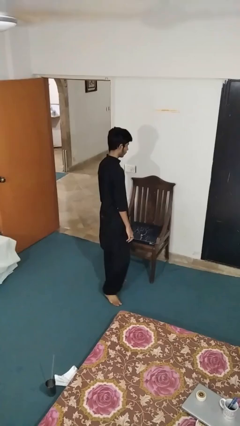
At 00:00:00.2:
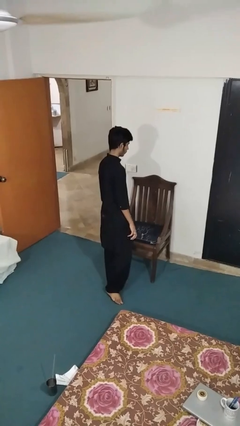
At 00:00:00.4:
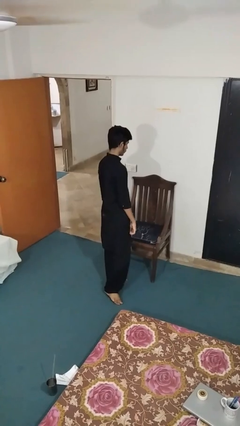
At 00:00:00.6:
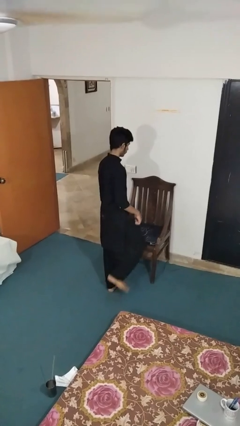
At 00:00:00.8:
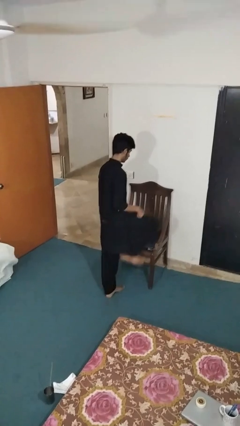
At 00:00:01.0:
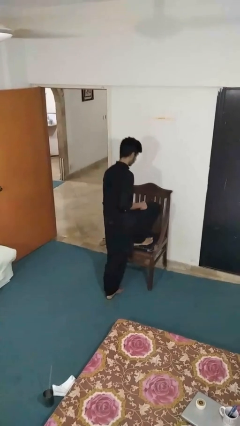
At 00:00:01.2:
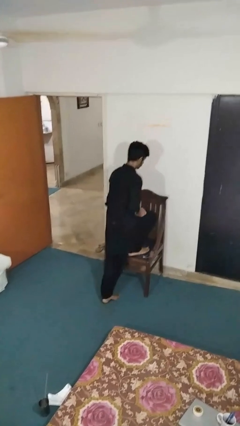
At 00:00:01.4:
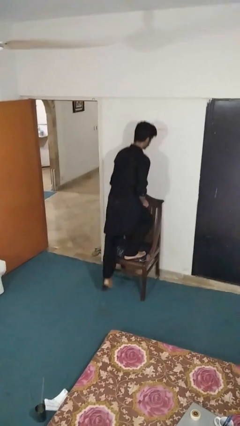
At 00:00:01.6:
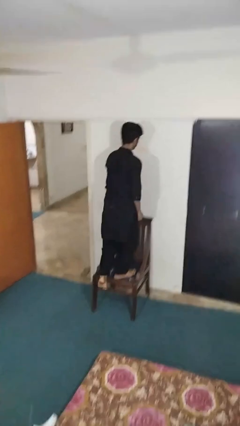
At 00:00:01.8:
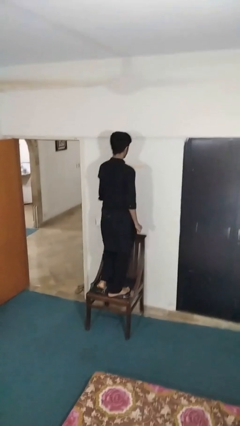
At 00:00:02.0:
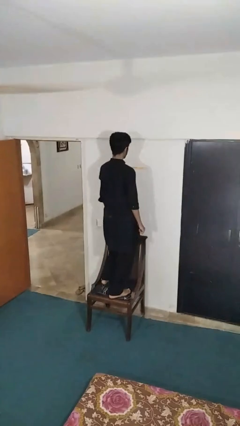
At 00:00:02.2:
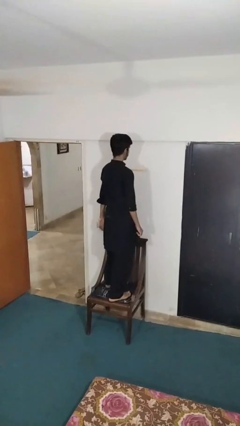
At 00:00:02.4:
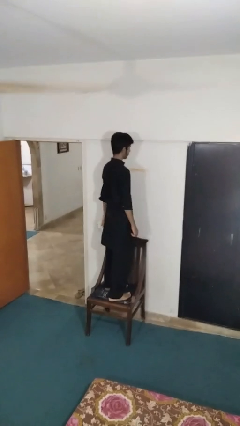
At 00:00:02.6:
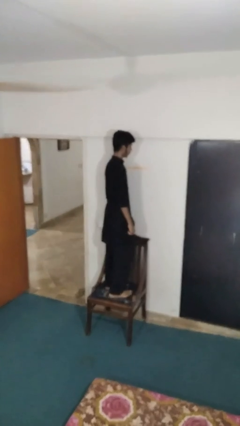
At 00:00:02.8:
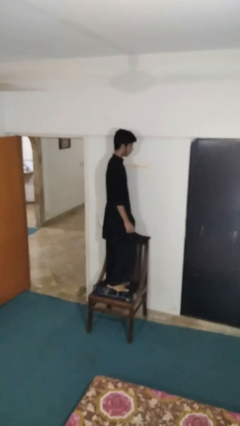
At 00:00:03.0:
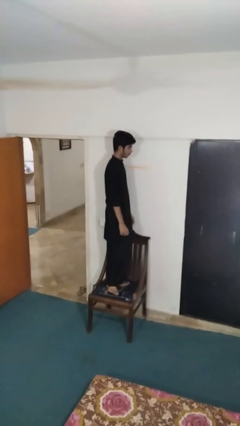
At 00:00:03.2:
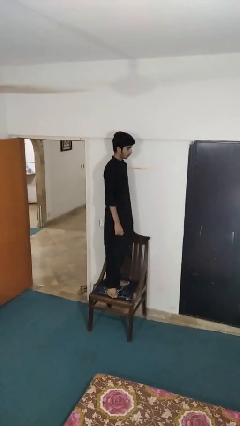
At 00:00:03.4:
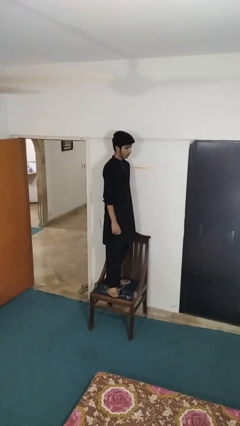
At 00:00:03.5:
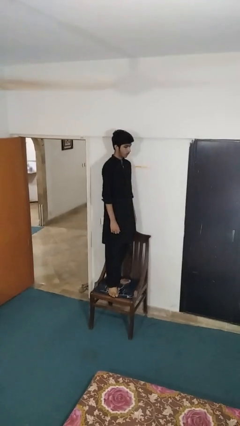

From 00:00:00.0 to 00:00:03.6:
person climbs on chair

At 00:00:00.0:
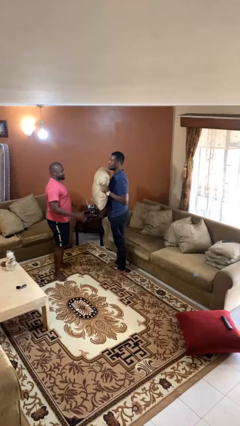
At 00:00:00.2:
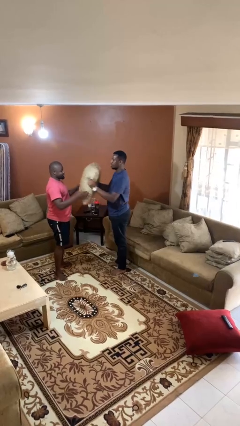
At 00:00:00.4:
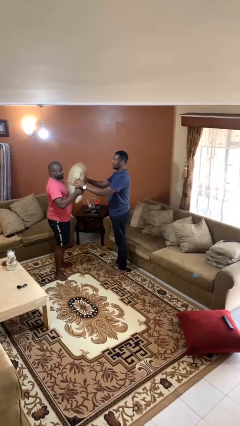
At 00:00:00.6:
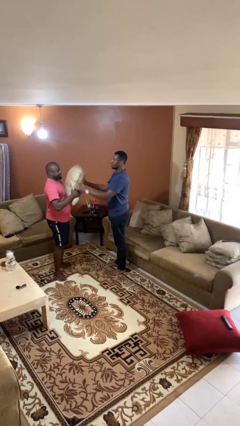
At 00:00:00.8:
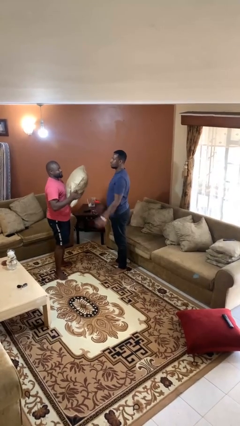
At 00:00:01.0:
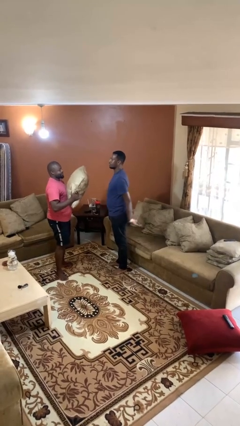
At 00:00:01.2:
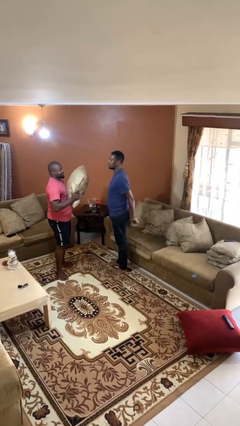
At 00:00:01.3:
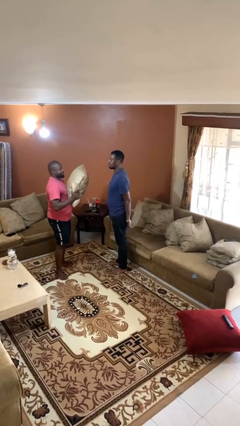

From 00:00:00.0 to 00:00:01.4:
person transfers object to person

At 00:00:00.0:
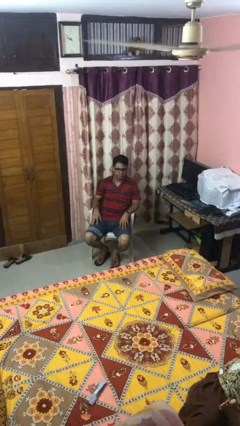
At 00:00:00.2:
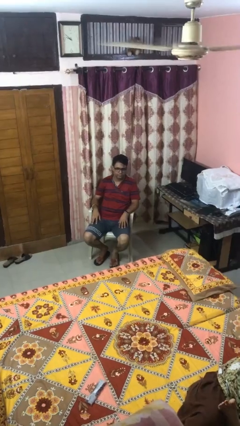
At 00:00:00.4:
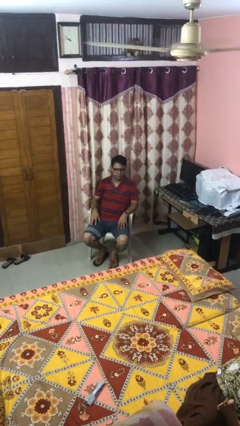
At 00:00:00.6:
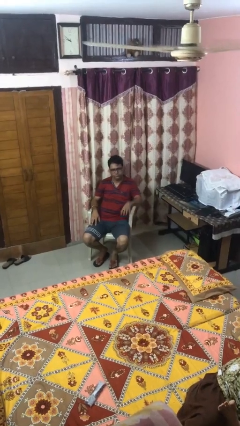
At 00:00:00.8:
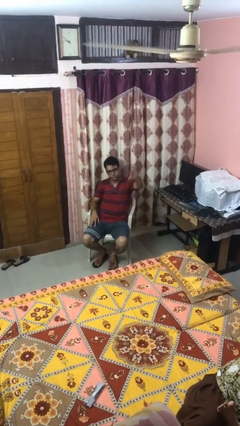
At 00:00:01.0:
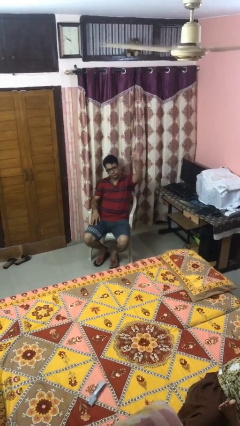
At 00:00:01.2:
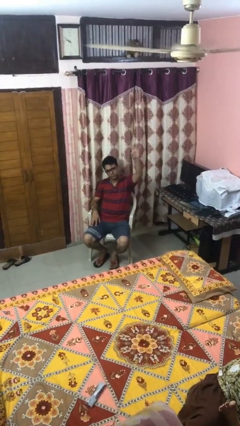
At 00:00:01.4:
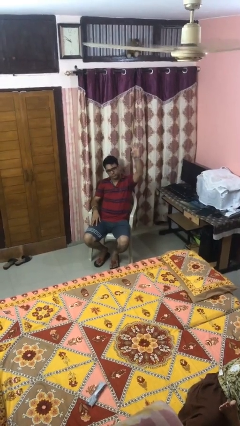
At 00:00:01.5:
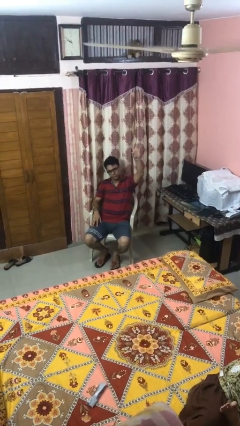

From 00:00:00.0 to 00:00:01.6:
person gestures raise hand

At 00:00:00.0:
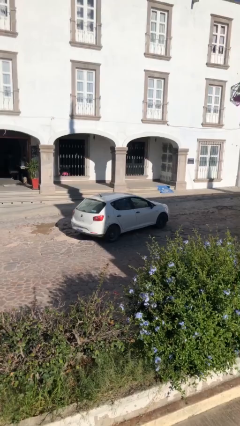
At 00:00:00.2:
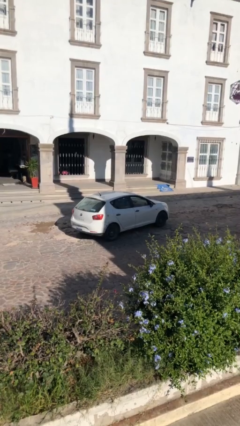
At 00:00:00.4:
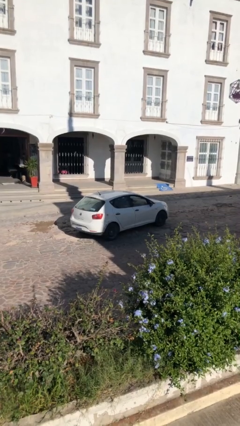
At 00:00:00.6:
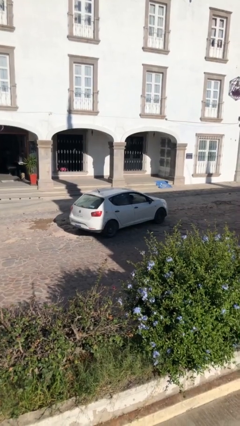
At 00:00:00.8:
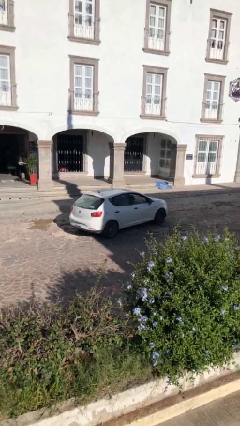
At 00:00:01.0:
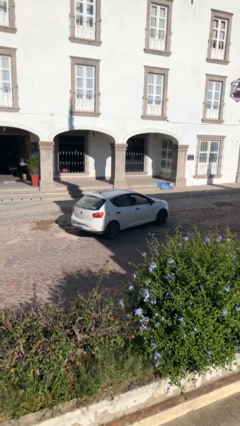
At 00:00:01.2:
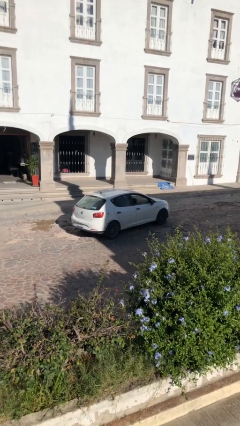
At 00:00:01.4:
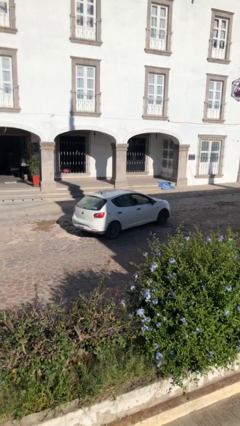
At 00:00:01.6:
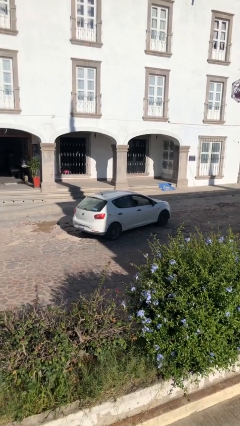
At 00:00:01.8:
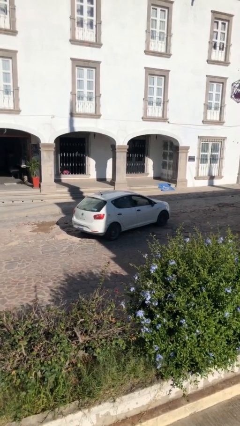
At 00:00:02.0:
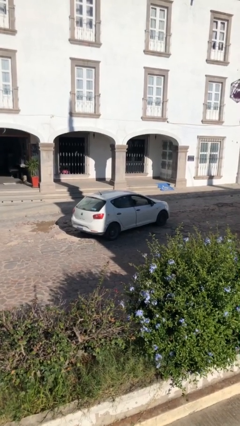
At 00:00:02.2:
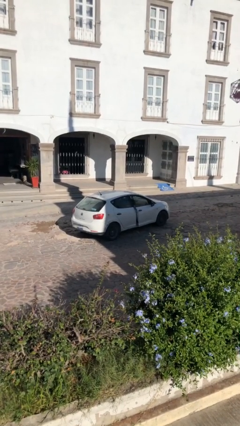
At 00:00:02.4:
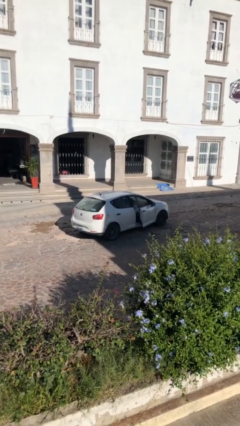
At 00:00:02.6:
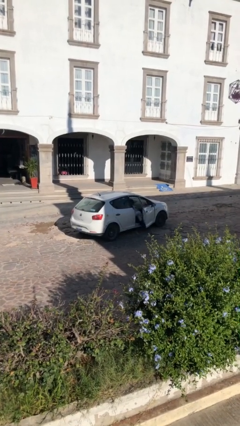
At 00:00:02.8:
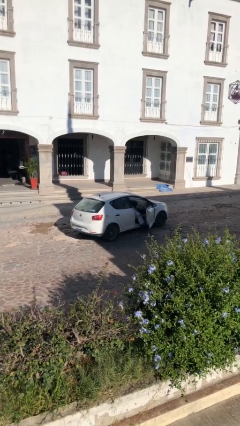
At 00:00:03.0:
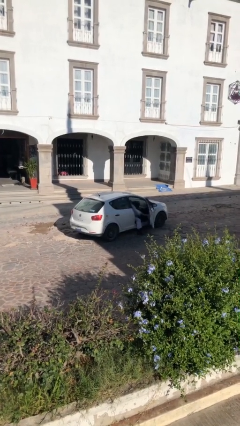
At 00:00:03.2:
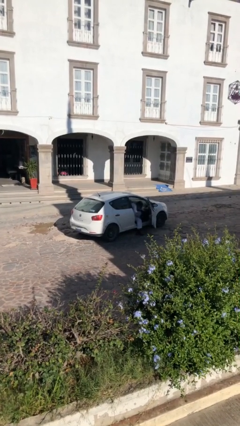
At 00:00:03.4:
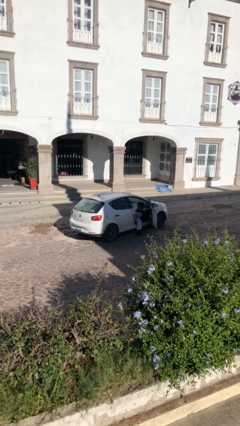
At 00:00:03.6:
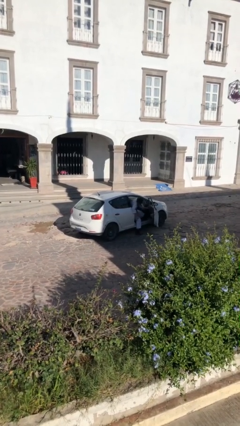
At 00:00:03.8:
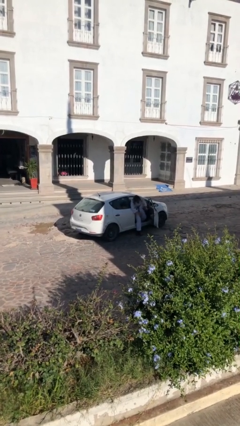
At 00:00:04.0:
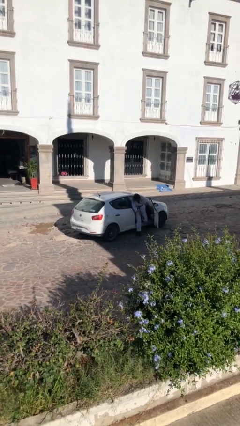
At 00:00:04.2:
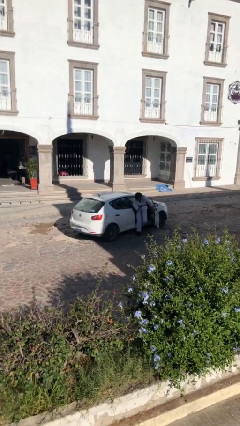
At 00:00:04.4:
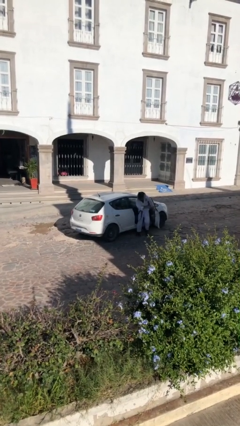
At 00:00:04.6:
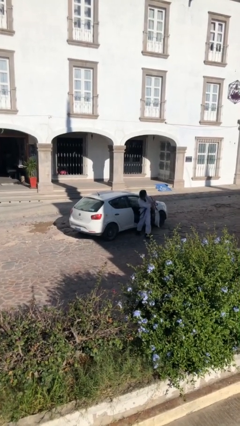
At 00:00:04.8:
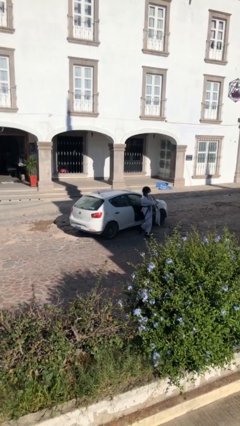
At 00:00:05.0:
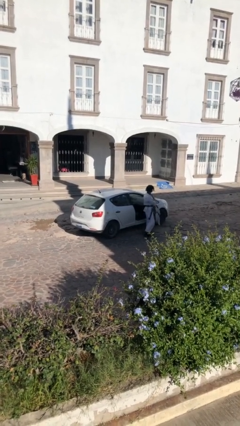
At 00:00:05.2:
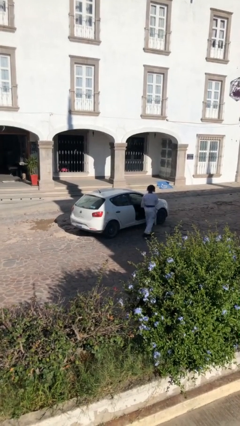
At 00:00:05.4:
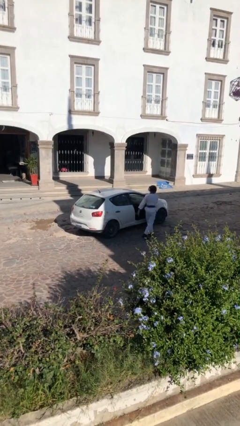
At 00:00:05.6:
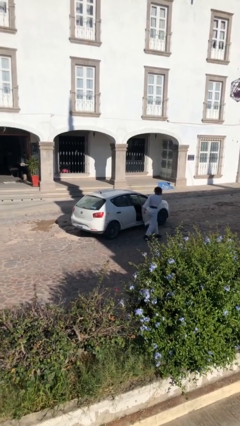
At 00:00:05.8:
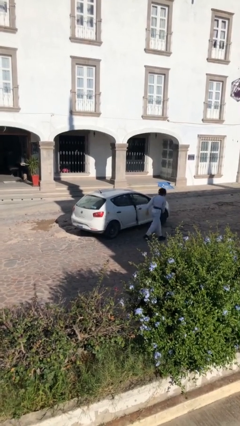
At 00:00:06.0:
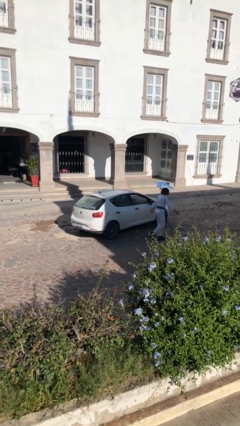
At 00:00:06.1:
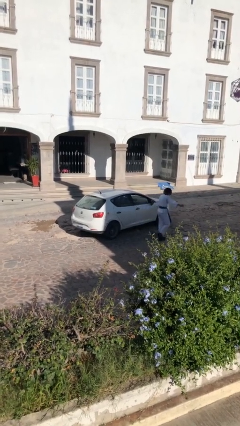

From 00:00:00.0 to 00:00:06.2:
car drops off person

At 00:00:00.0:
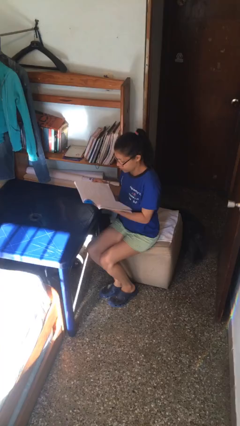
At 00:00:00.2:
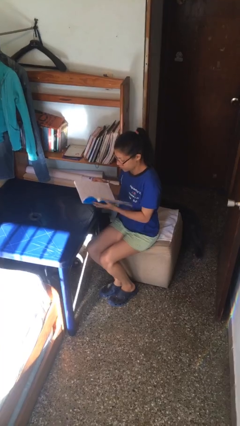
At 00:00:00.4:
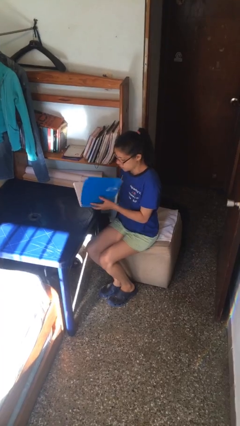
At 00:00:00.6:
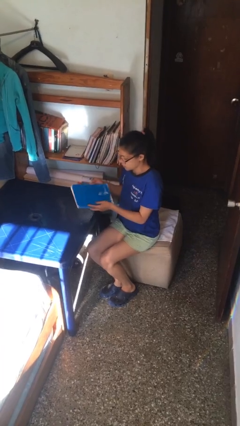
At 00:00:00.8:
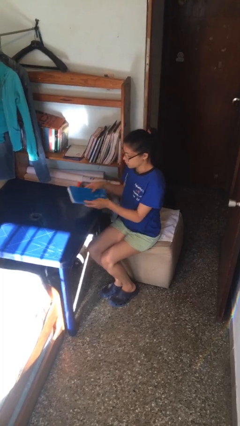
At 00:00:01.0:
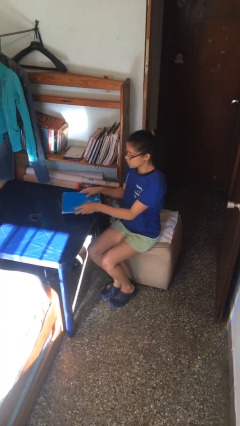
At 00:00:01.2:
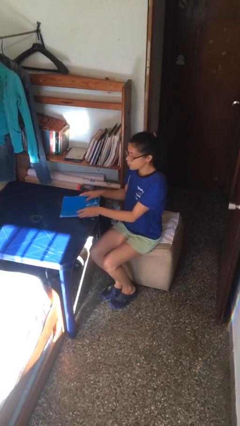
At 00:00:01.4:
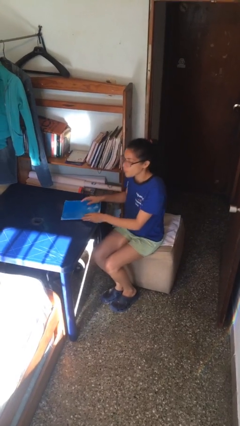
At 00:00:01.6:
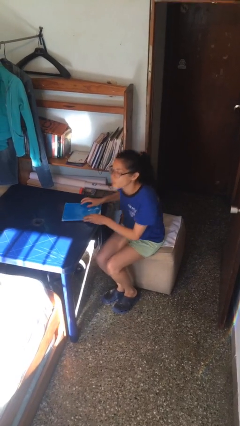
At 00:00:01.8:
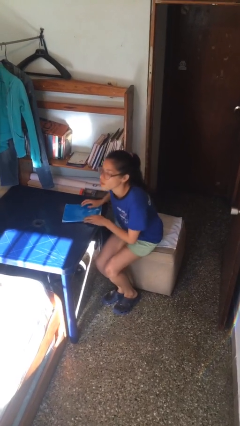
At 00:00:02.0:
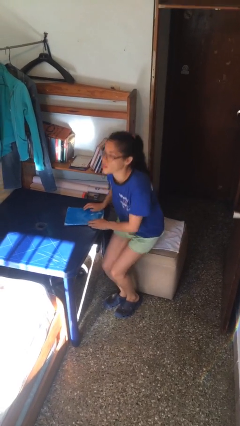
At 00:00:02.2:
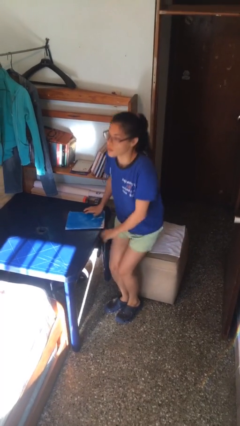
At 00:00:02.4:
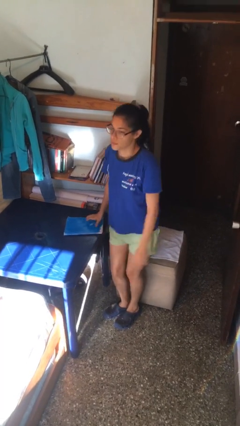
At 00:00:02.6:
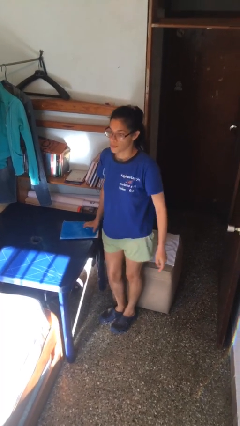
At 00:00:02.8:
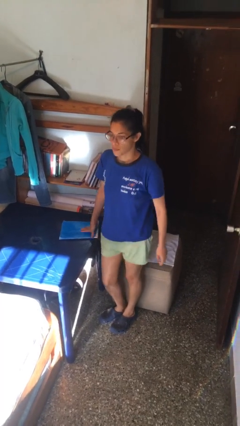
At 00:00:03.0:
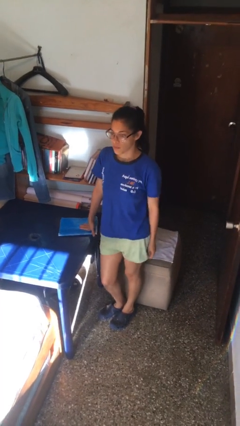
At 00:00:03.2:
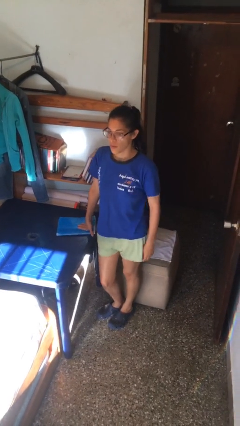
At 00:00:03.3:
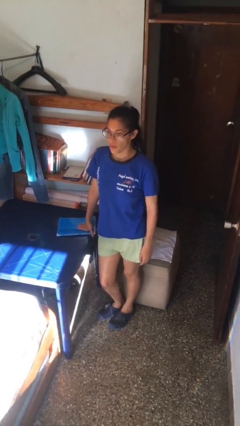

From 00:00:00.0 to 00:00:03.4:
person stands up

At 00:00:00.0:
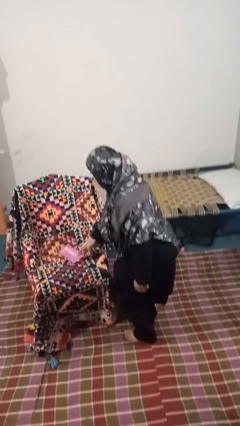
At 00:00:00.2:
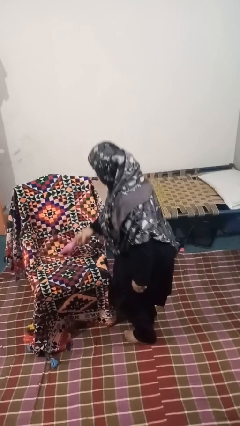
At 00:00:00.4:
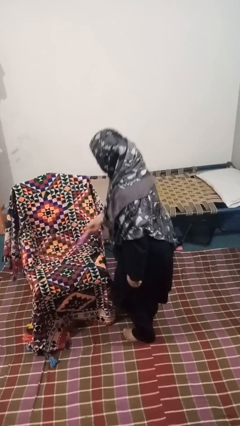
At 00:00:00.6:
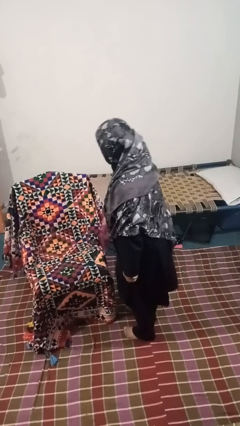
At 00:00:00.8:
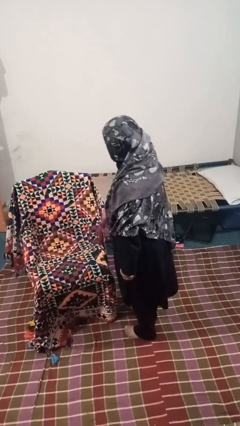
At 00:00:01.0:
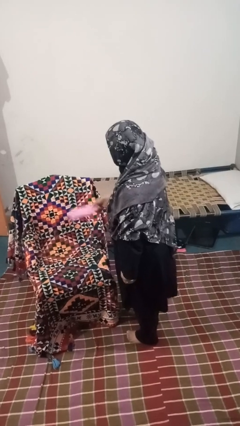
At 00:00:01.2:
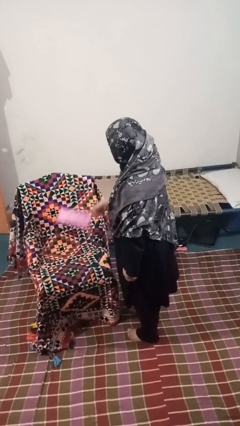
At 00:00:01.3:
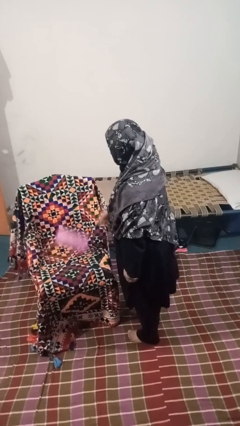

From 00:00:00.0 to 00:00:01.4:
person picks up object from couch
